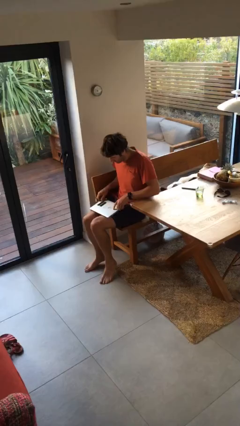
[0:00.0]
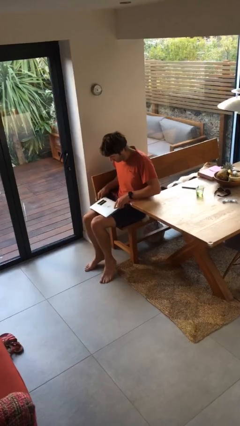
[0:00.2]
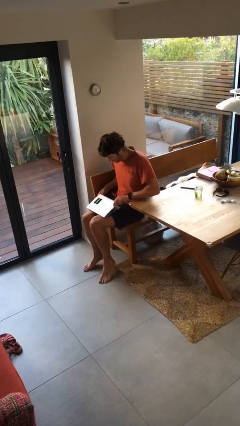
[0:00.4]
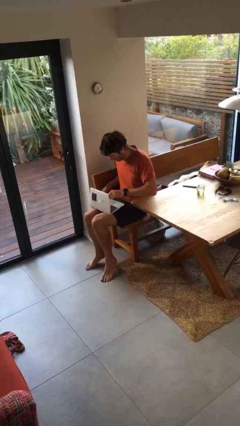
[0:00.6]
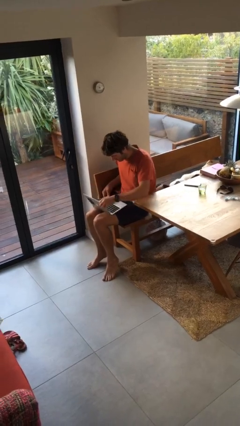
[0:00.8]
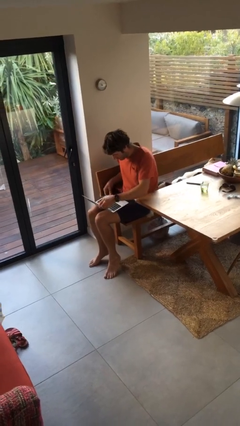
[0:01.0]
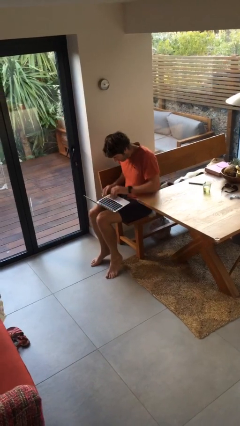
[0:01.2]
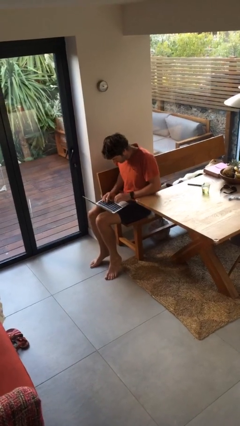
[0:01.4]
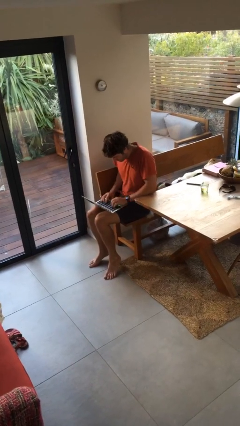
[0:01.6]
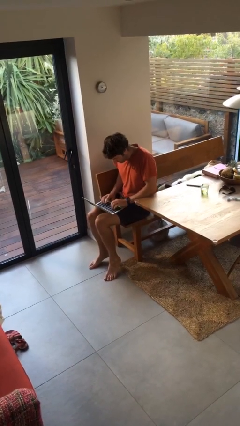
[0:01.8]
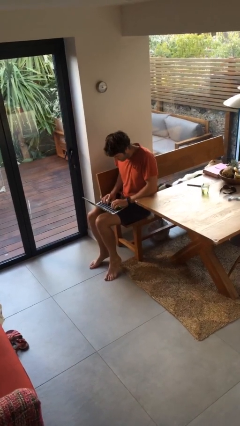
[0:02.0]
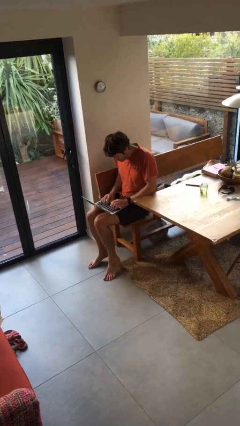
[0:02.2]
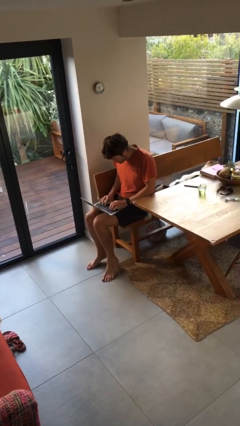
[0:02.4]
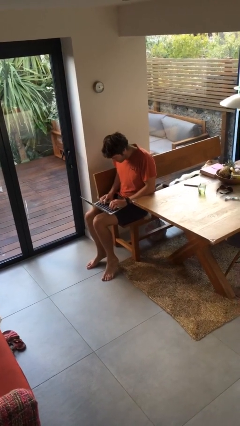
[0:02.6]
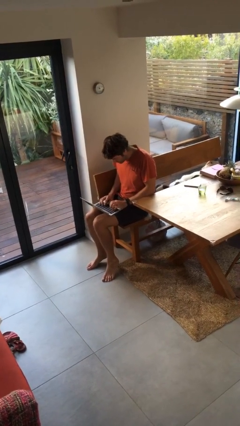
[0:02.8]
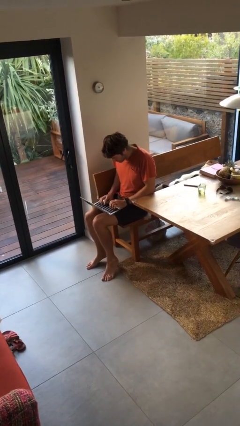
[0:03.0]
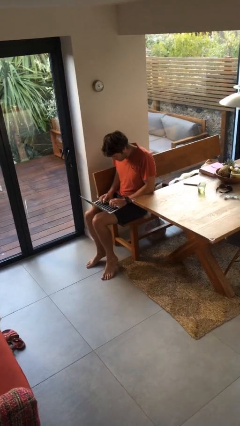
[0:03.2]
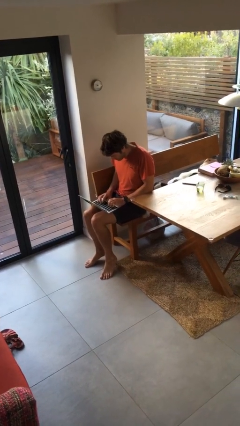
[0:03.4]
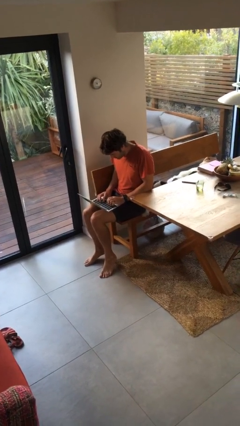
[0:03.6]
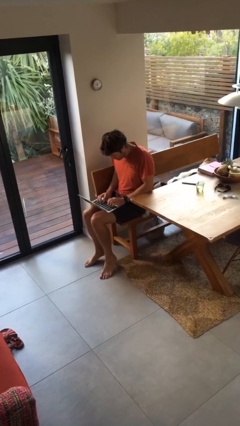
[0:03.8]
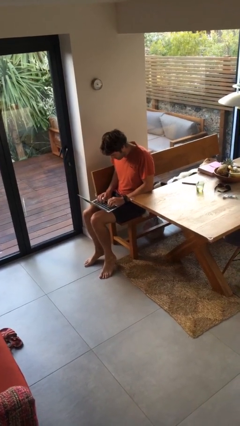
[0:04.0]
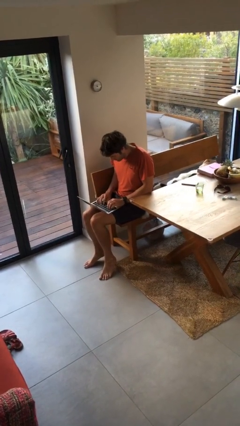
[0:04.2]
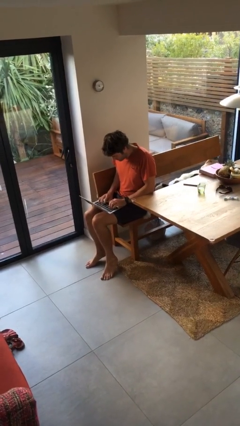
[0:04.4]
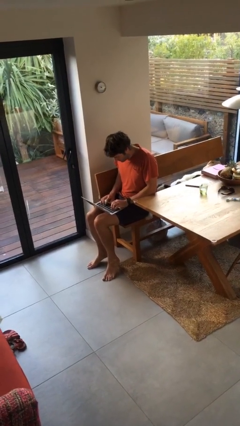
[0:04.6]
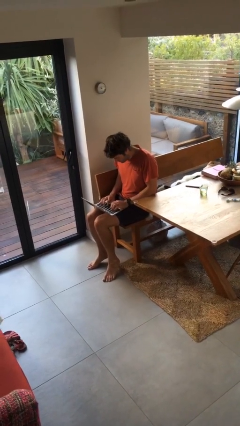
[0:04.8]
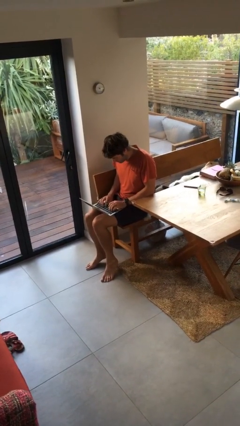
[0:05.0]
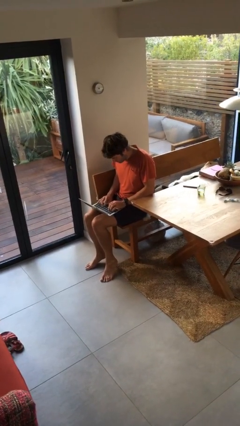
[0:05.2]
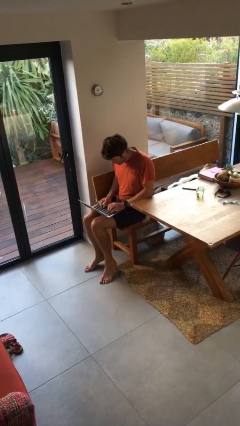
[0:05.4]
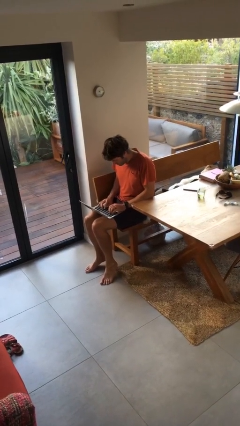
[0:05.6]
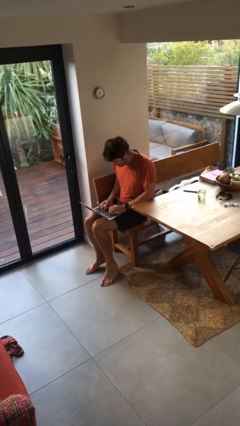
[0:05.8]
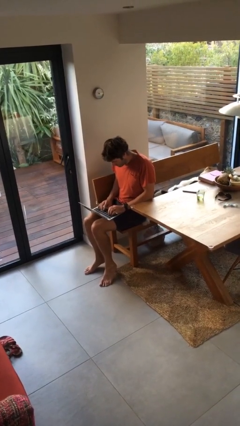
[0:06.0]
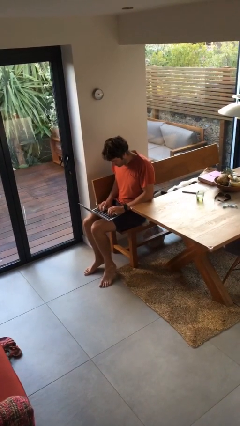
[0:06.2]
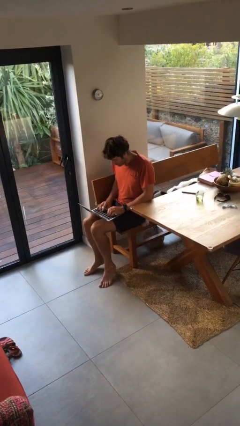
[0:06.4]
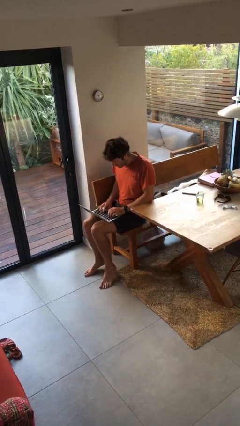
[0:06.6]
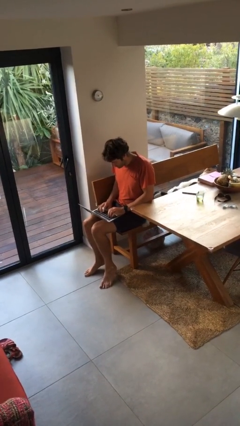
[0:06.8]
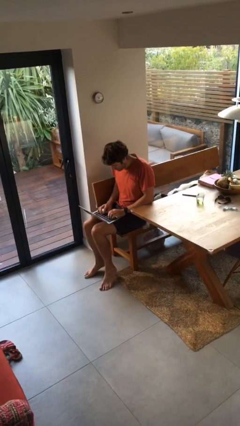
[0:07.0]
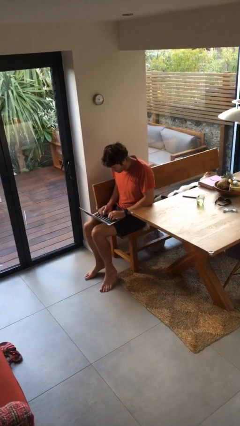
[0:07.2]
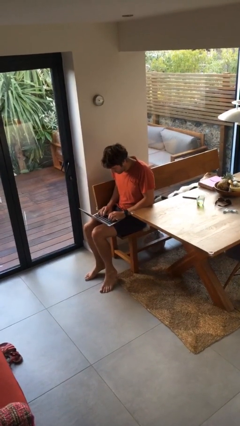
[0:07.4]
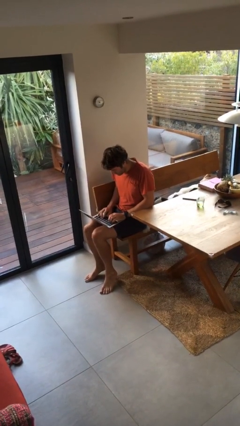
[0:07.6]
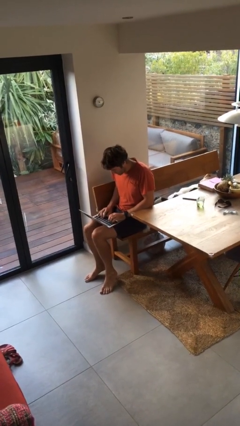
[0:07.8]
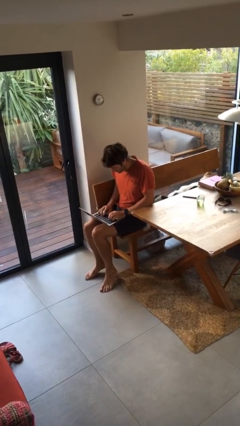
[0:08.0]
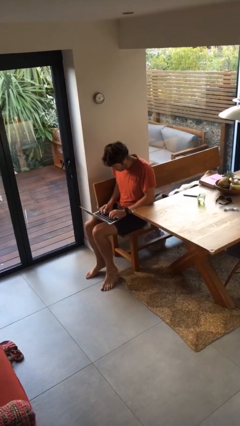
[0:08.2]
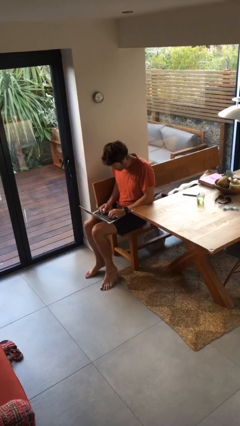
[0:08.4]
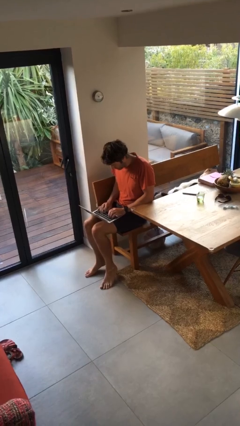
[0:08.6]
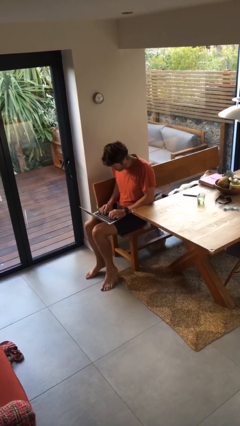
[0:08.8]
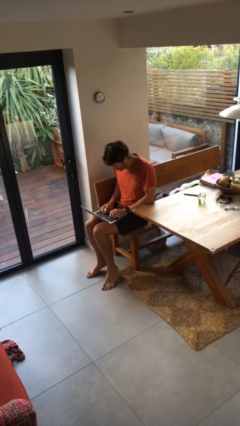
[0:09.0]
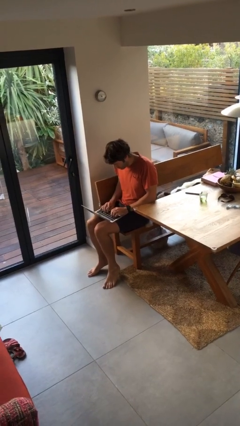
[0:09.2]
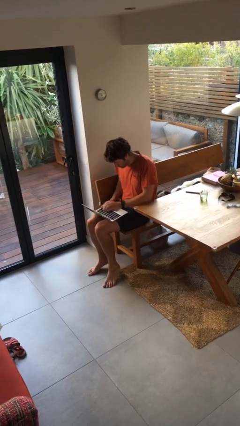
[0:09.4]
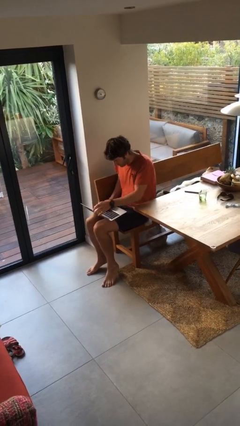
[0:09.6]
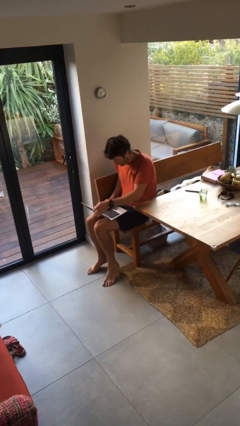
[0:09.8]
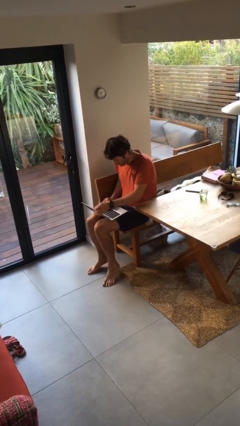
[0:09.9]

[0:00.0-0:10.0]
person interacts with laptop

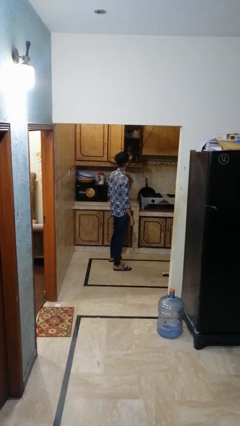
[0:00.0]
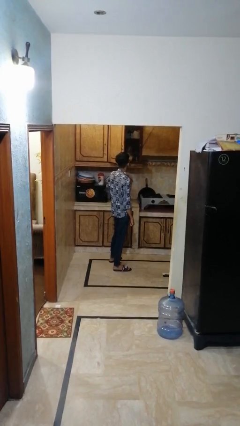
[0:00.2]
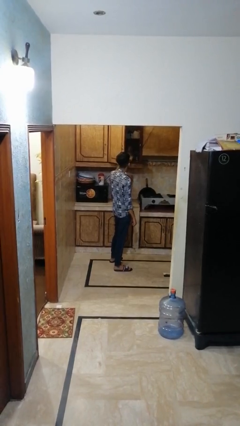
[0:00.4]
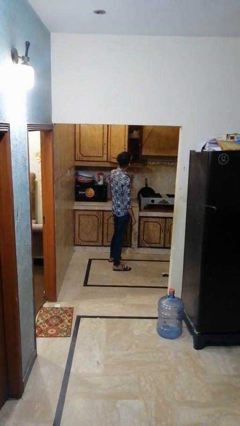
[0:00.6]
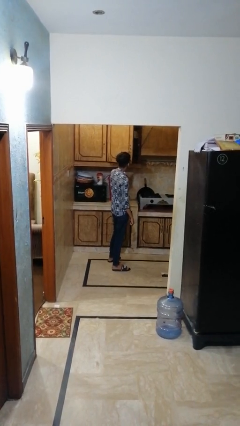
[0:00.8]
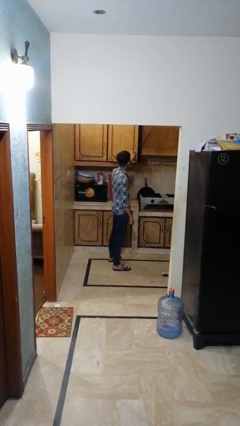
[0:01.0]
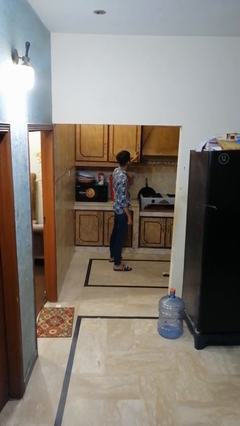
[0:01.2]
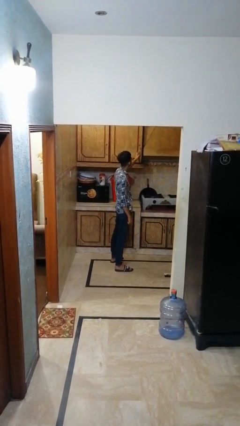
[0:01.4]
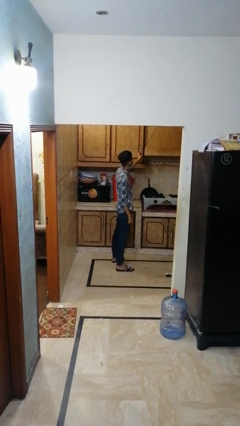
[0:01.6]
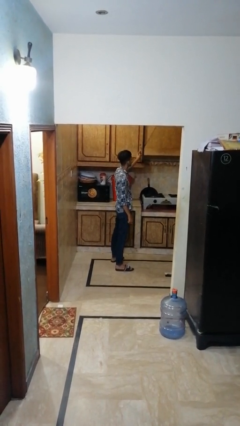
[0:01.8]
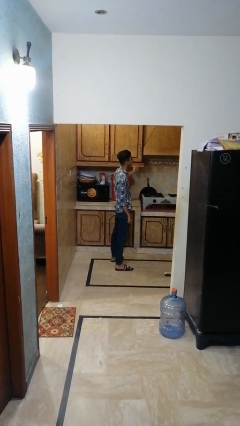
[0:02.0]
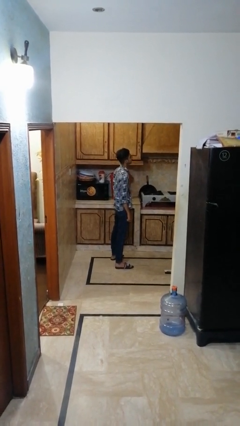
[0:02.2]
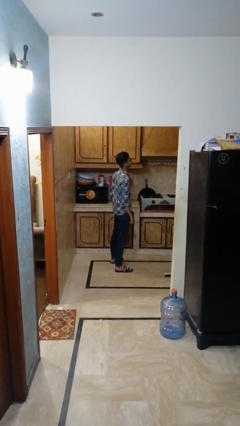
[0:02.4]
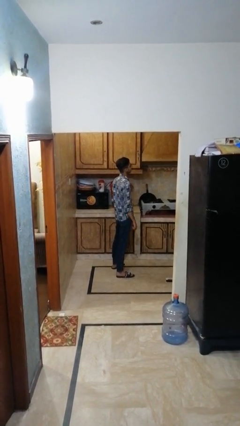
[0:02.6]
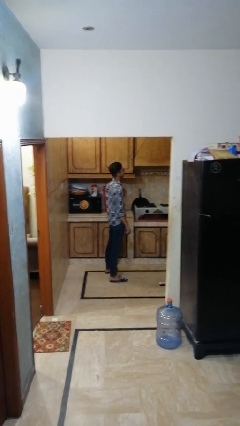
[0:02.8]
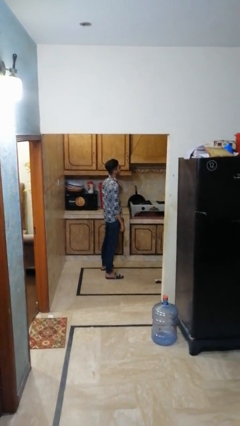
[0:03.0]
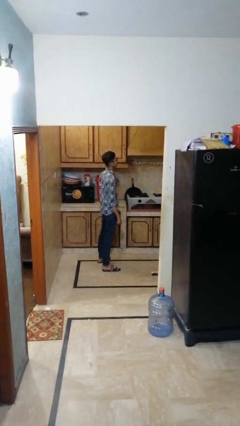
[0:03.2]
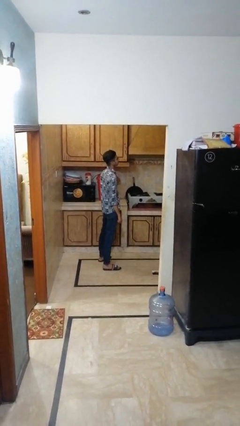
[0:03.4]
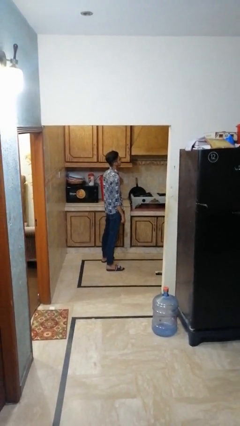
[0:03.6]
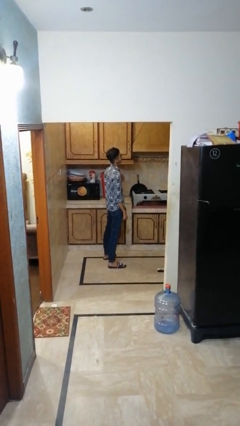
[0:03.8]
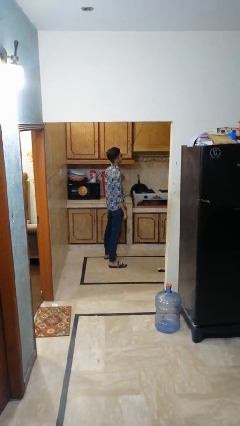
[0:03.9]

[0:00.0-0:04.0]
person closes cabinet

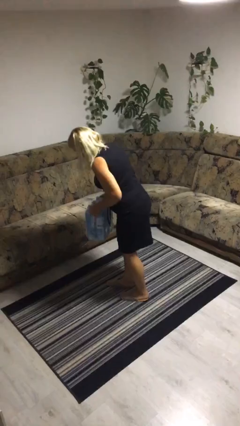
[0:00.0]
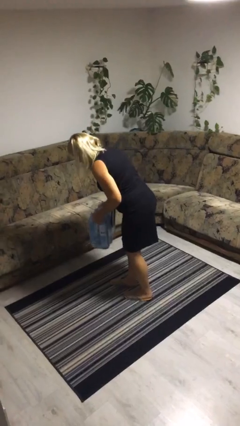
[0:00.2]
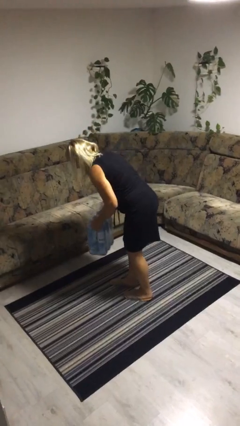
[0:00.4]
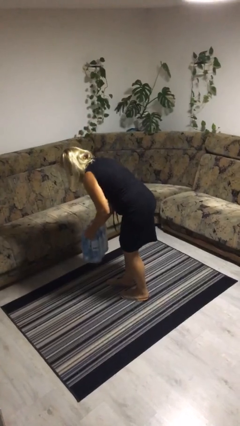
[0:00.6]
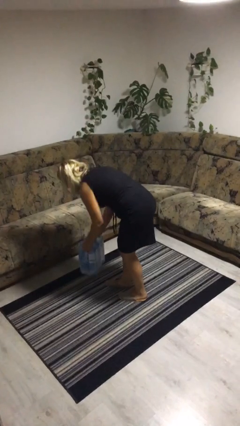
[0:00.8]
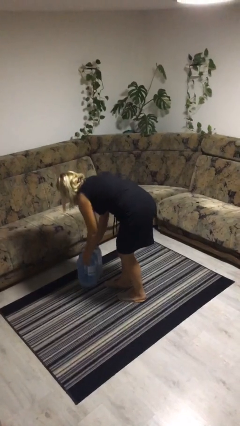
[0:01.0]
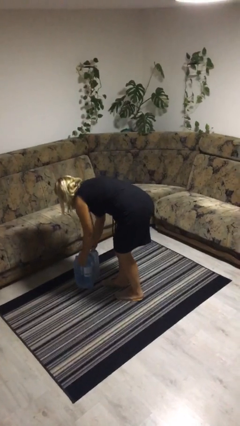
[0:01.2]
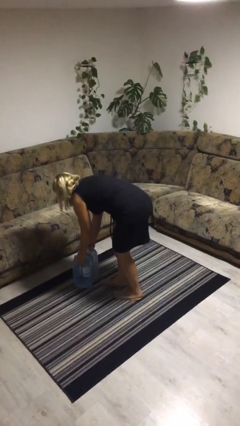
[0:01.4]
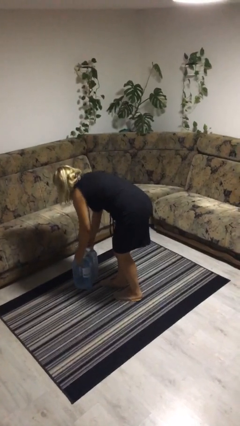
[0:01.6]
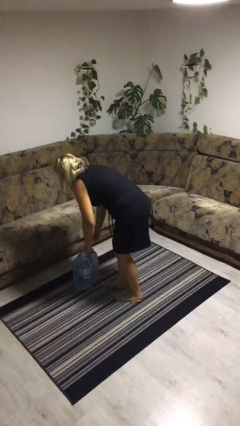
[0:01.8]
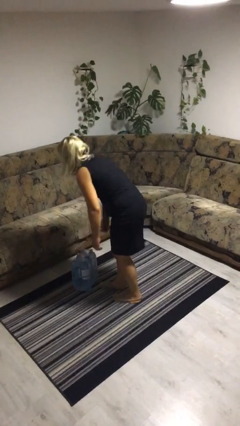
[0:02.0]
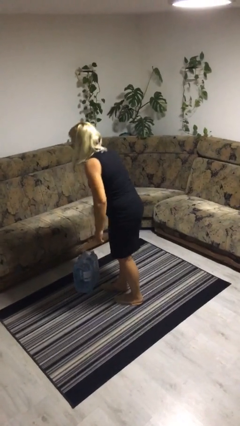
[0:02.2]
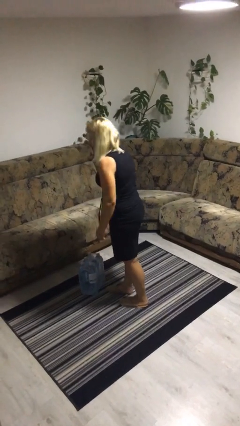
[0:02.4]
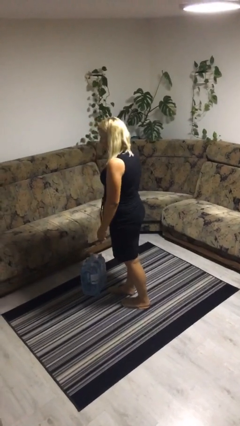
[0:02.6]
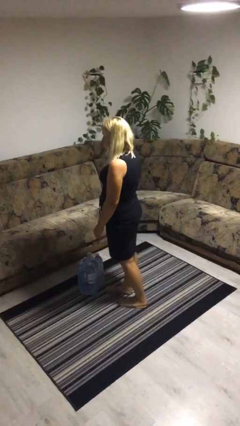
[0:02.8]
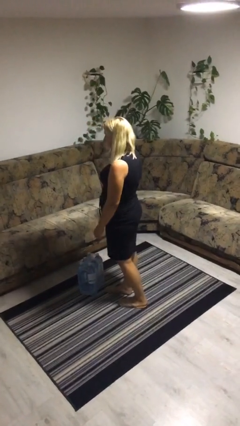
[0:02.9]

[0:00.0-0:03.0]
person puts down object on floor

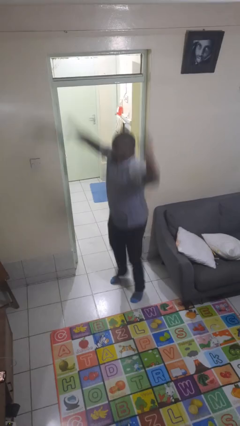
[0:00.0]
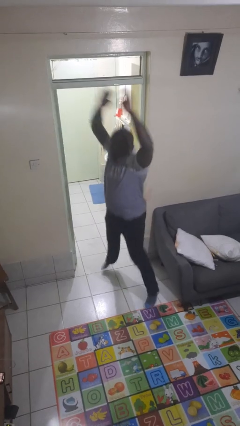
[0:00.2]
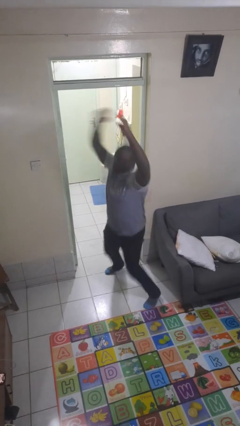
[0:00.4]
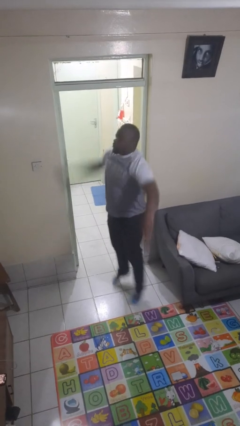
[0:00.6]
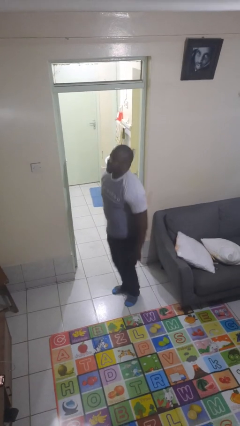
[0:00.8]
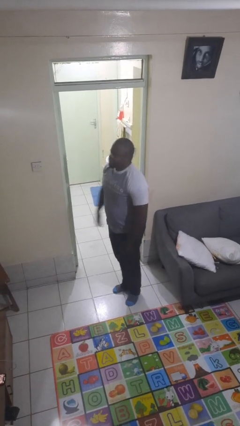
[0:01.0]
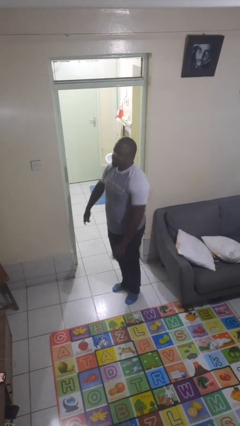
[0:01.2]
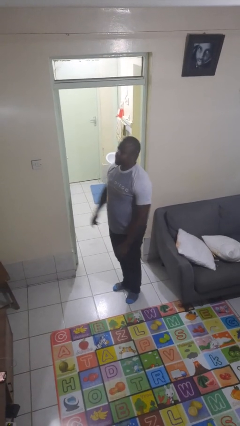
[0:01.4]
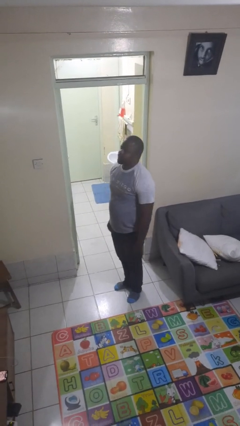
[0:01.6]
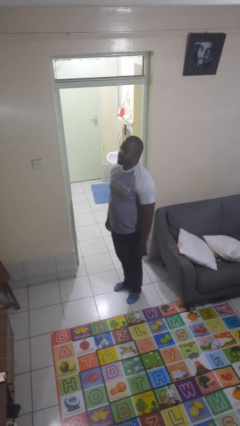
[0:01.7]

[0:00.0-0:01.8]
person exercises with jumping jacks
